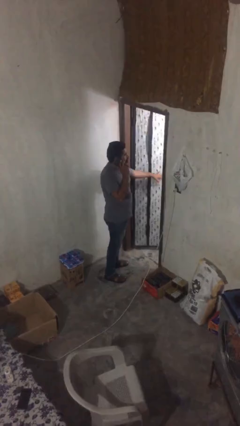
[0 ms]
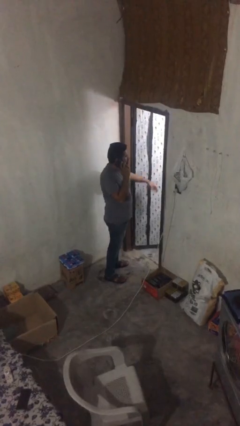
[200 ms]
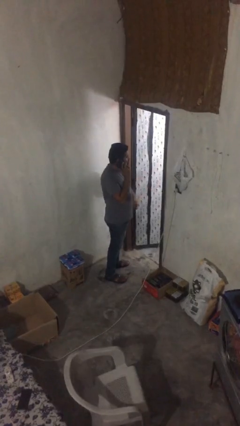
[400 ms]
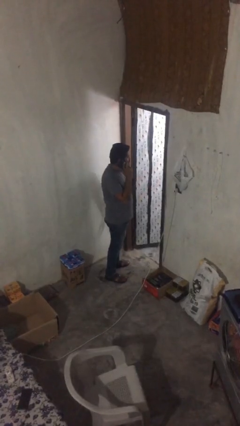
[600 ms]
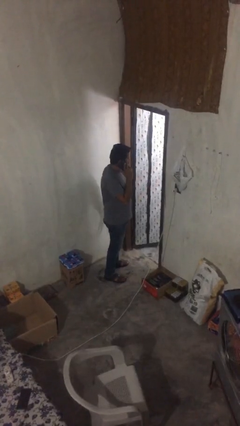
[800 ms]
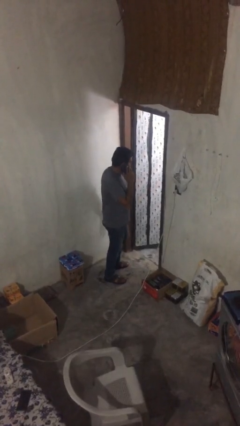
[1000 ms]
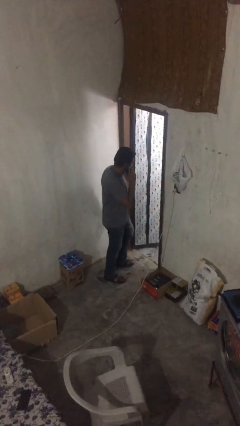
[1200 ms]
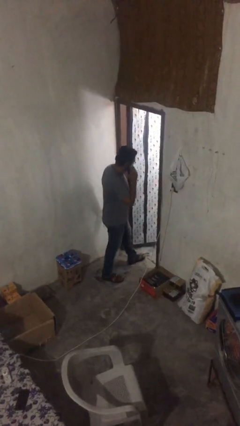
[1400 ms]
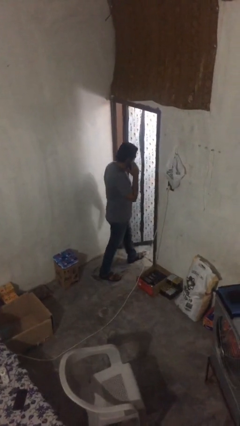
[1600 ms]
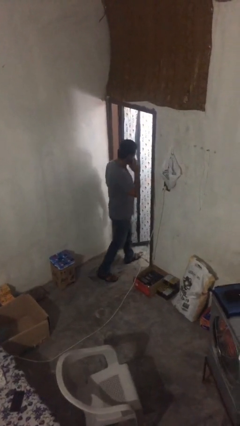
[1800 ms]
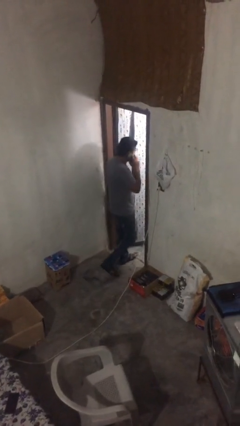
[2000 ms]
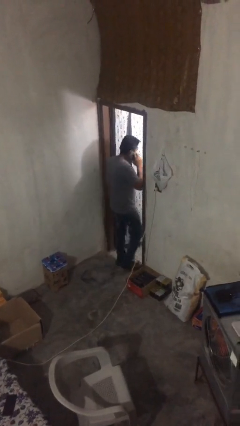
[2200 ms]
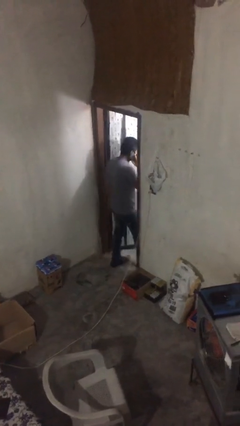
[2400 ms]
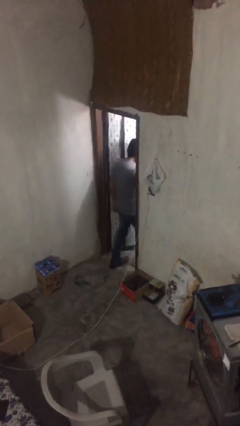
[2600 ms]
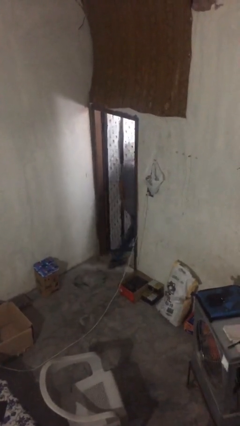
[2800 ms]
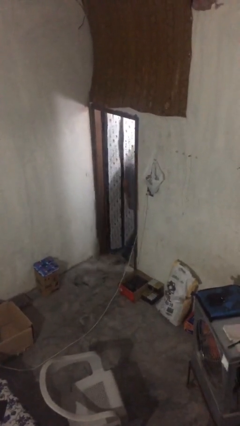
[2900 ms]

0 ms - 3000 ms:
person exits scene through structure

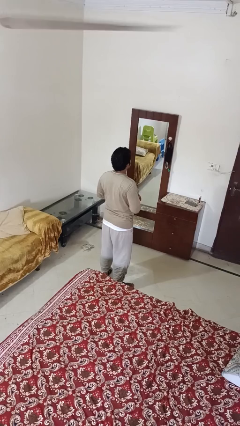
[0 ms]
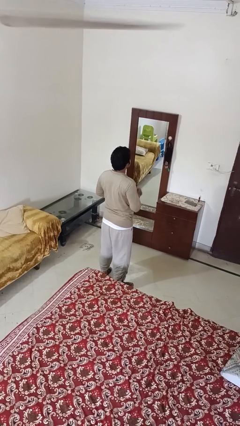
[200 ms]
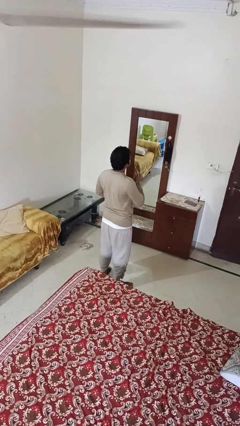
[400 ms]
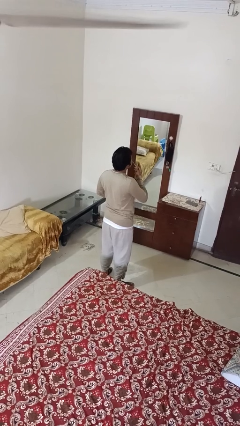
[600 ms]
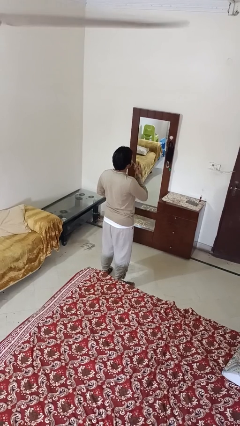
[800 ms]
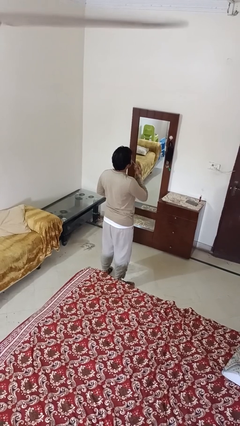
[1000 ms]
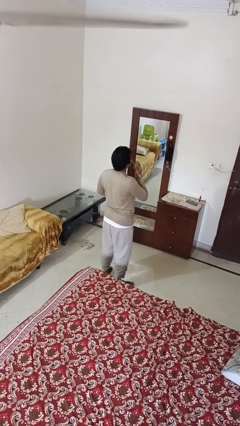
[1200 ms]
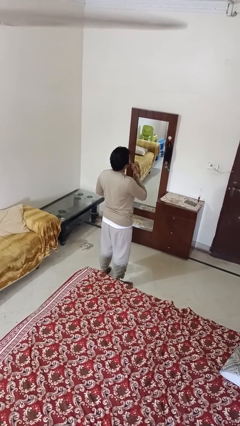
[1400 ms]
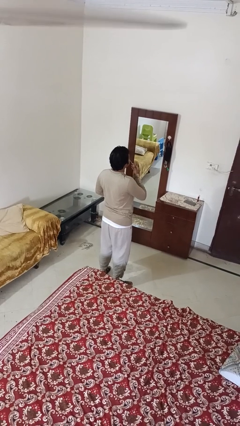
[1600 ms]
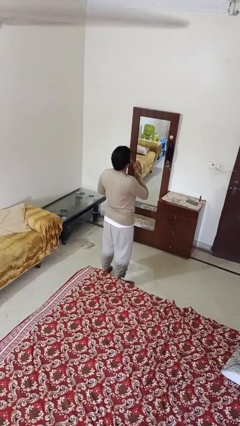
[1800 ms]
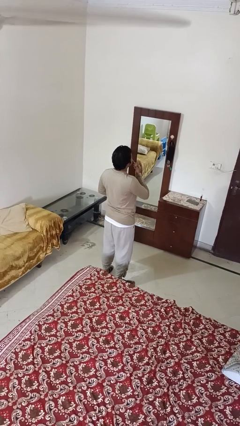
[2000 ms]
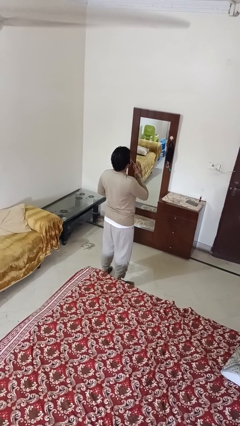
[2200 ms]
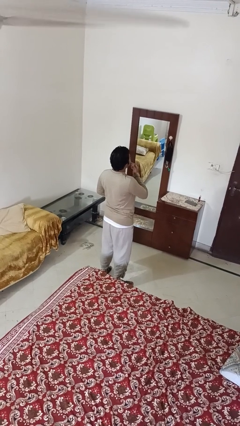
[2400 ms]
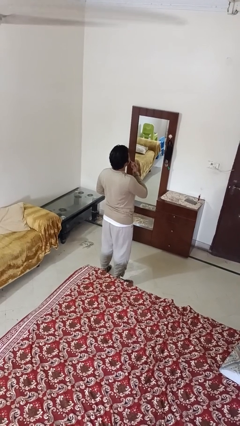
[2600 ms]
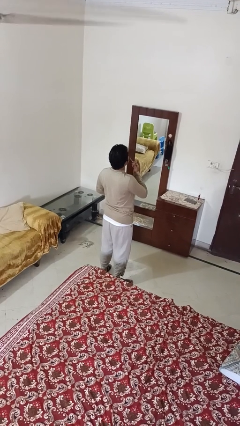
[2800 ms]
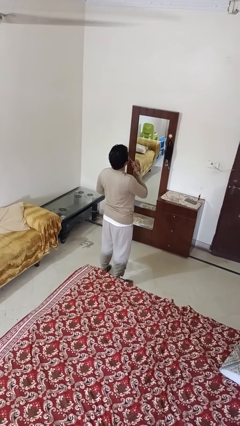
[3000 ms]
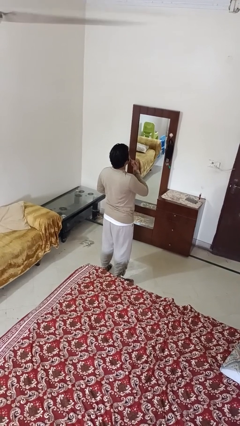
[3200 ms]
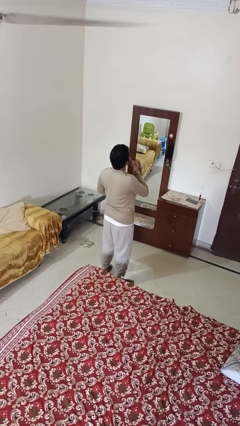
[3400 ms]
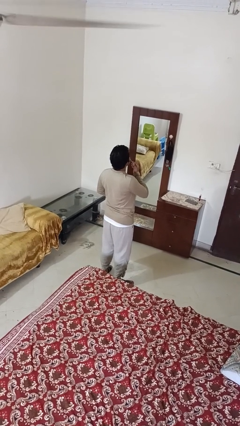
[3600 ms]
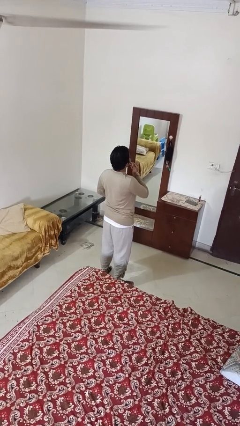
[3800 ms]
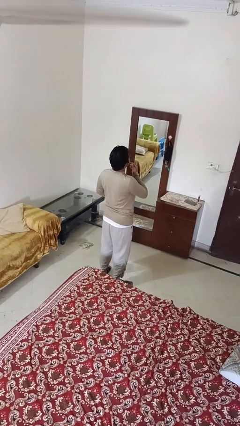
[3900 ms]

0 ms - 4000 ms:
person applies lip makeup

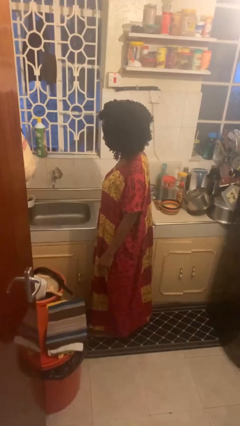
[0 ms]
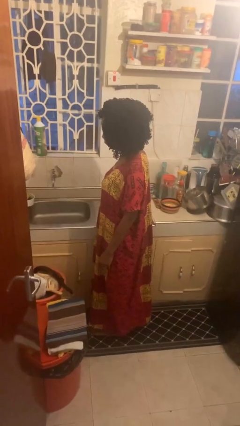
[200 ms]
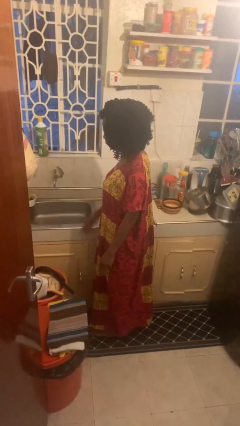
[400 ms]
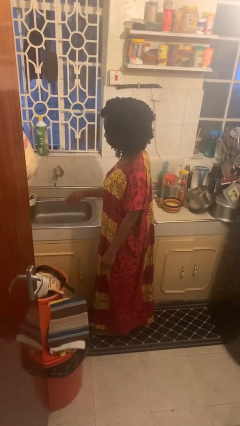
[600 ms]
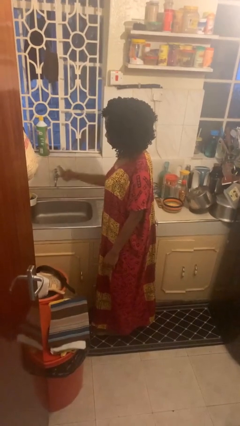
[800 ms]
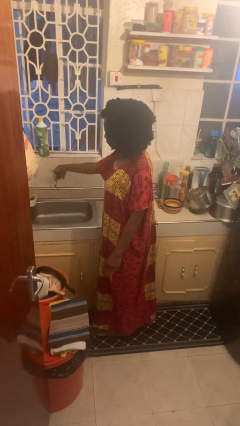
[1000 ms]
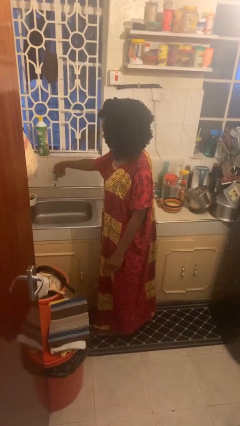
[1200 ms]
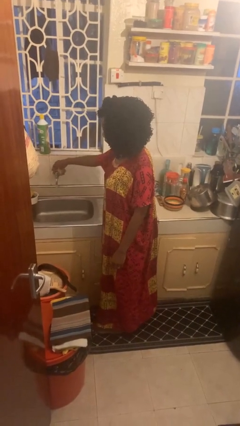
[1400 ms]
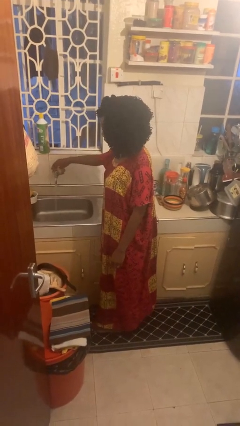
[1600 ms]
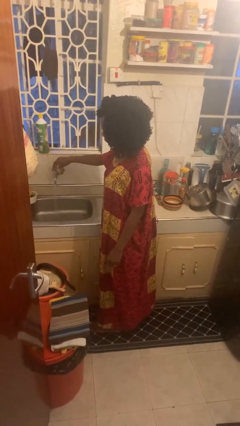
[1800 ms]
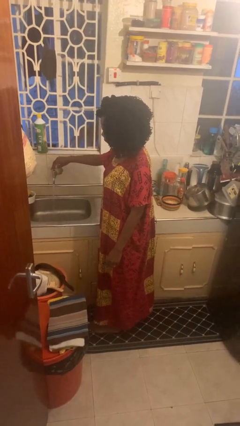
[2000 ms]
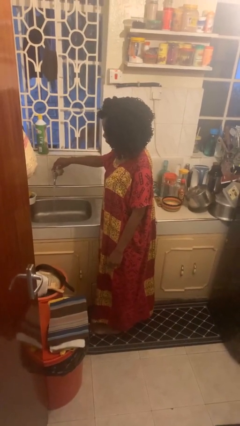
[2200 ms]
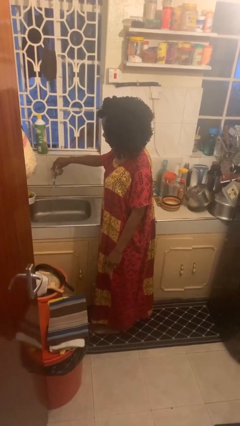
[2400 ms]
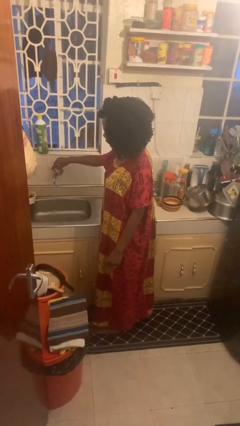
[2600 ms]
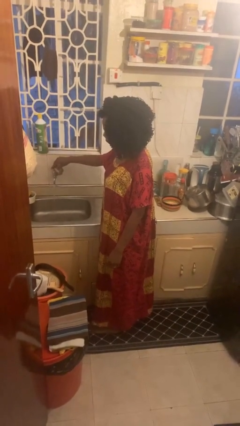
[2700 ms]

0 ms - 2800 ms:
person turns on faucet

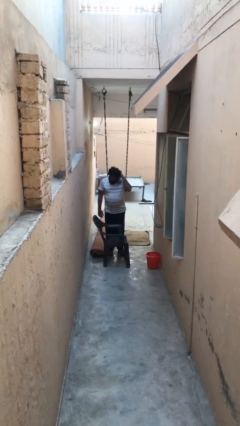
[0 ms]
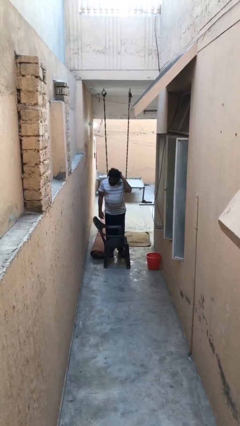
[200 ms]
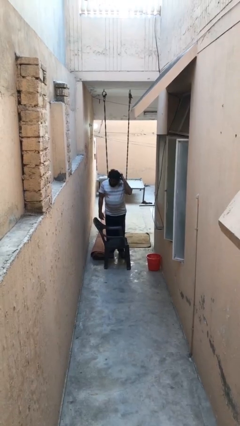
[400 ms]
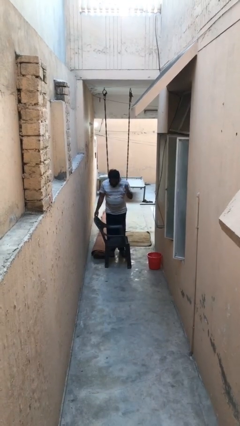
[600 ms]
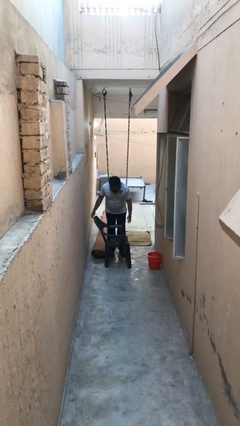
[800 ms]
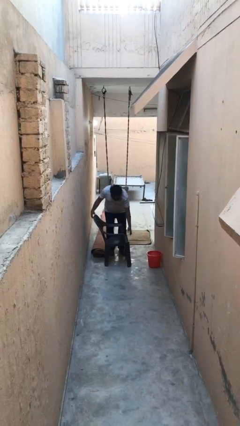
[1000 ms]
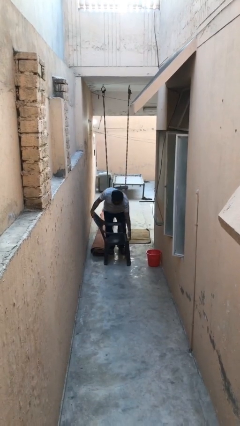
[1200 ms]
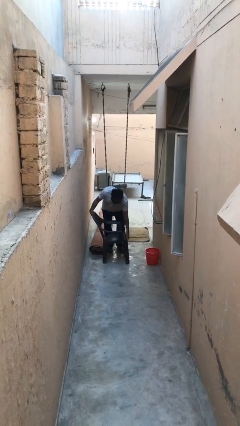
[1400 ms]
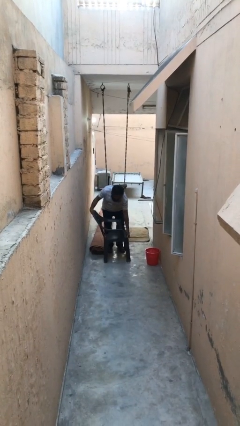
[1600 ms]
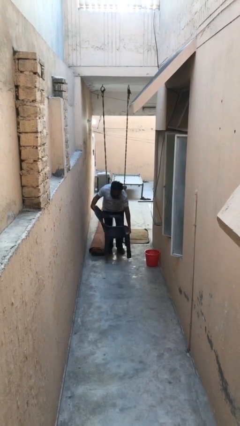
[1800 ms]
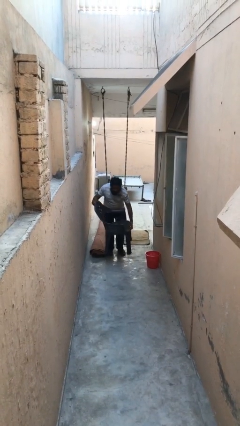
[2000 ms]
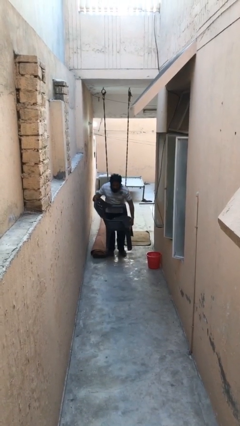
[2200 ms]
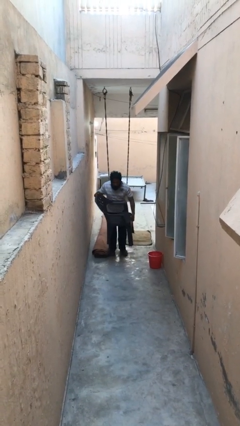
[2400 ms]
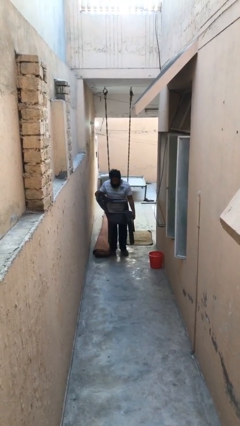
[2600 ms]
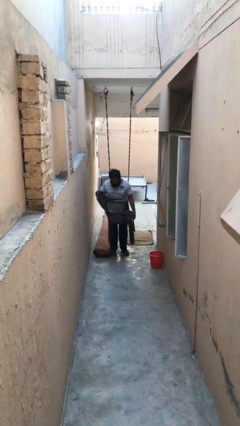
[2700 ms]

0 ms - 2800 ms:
person picks up object from floor

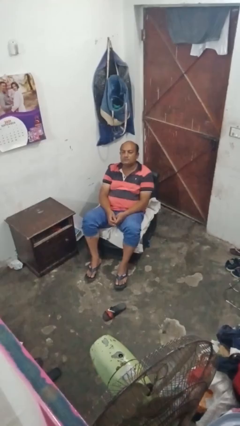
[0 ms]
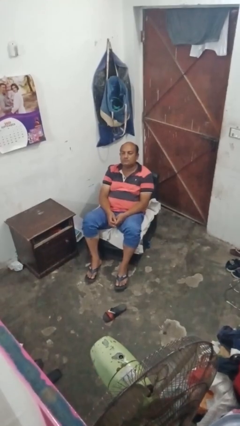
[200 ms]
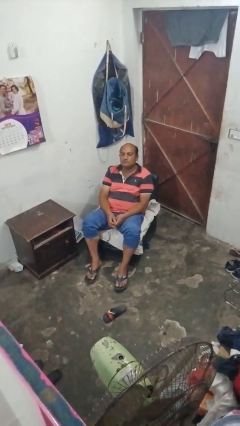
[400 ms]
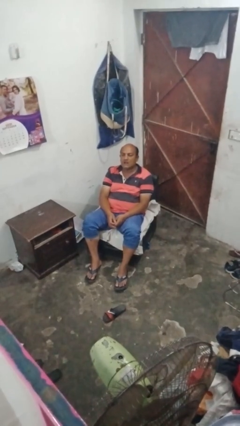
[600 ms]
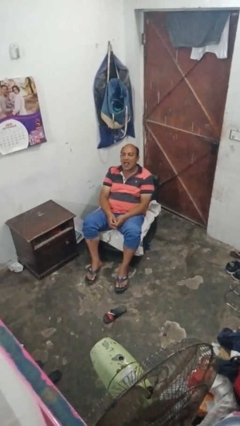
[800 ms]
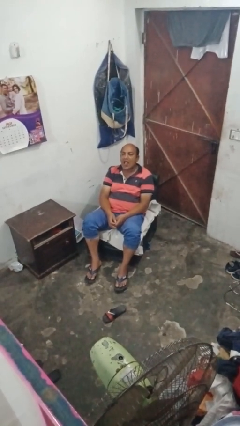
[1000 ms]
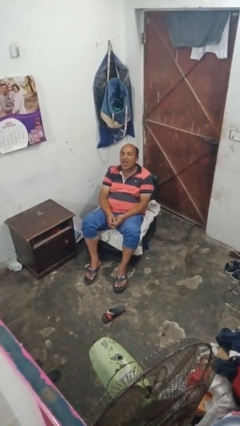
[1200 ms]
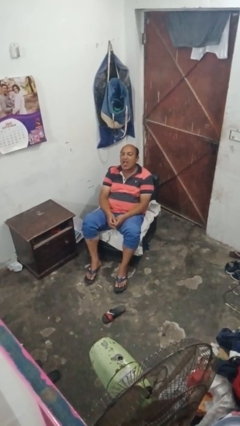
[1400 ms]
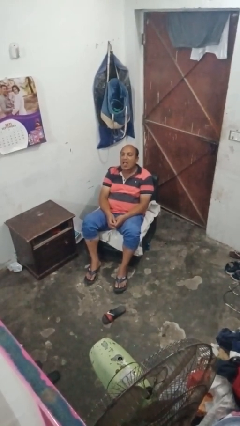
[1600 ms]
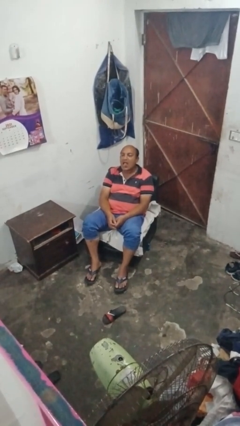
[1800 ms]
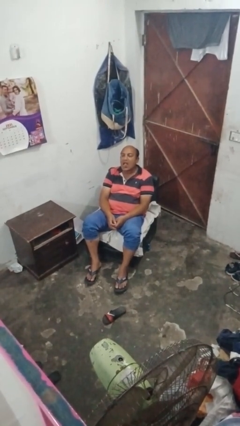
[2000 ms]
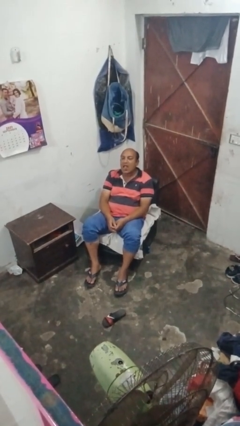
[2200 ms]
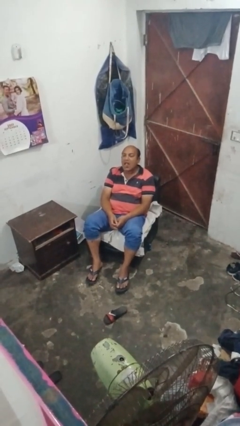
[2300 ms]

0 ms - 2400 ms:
person sticks out tongue

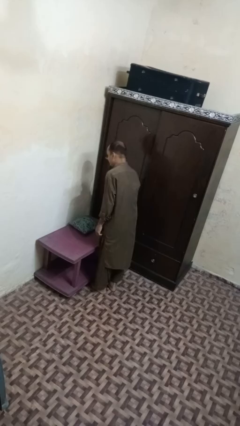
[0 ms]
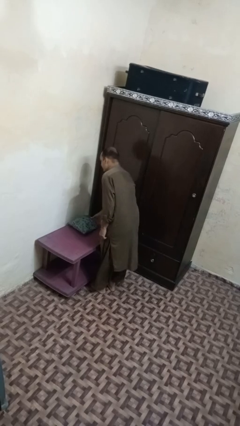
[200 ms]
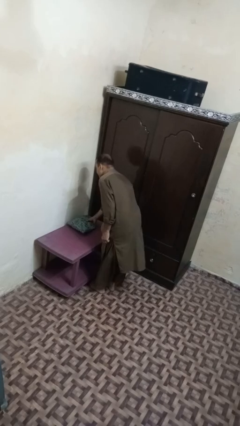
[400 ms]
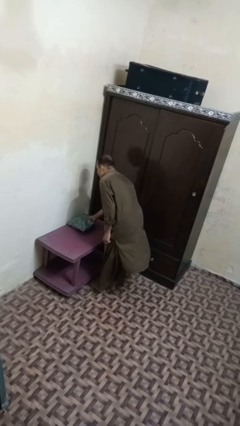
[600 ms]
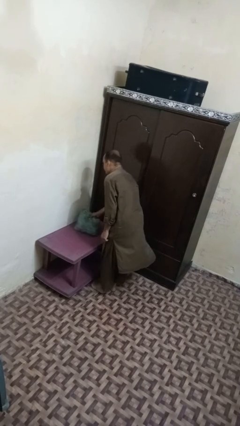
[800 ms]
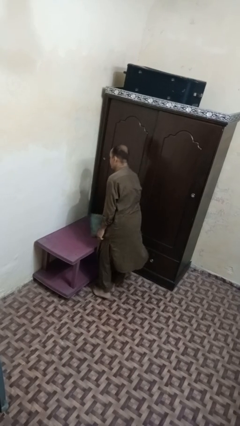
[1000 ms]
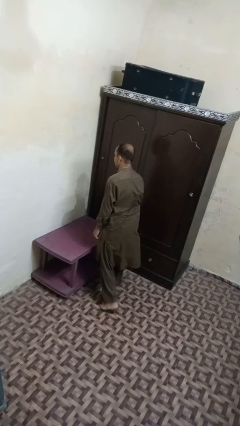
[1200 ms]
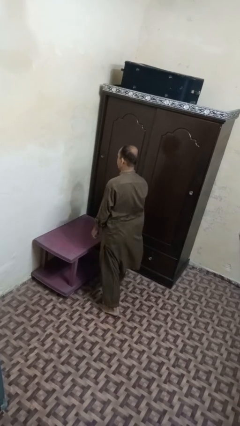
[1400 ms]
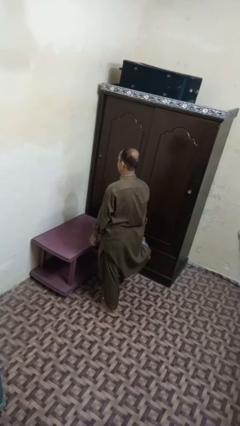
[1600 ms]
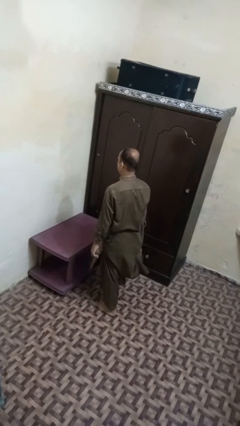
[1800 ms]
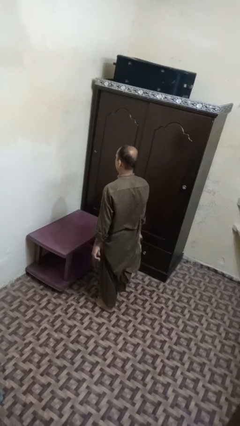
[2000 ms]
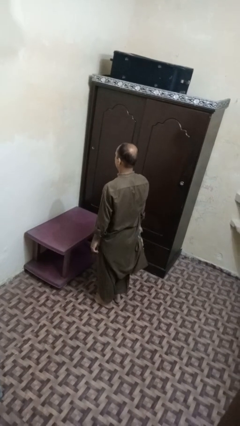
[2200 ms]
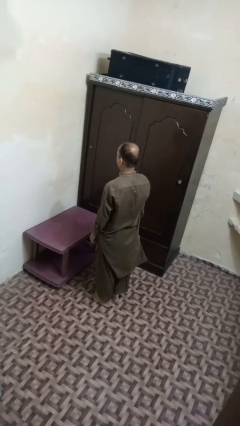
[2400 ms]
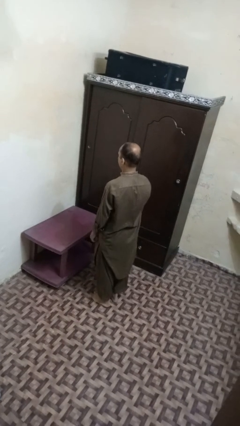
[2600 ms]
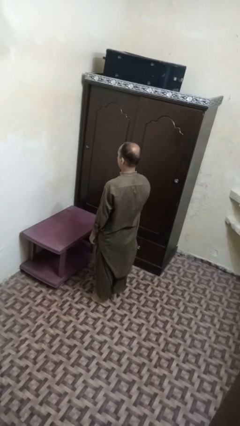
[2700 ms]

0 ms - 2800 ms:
person picks up object from table
